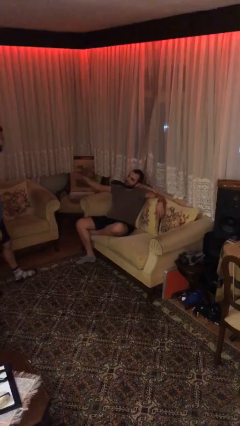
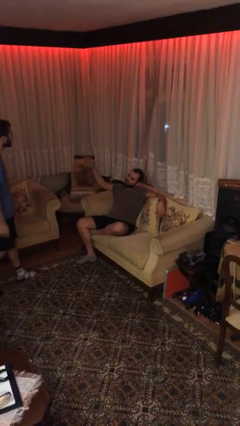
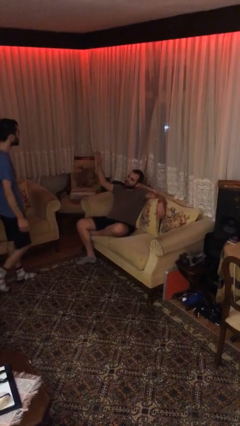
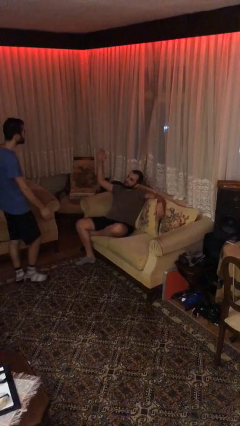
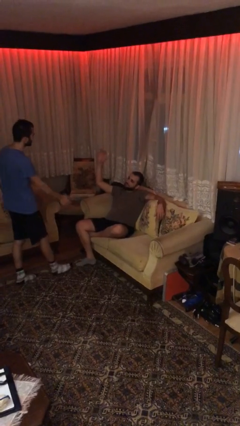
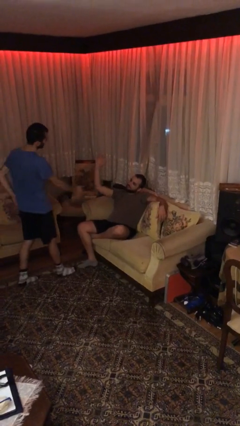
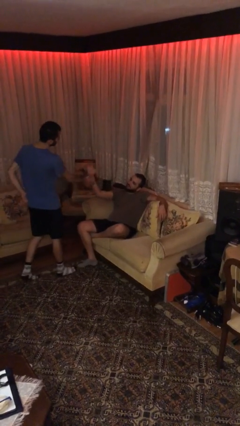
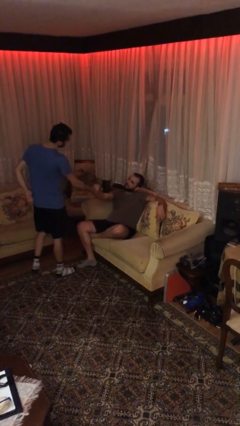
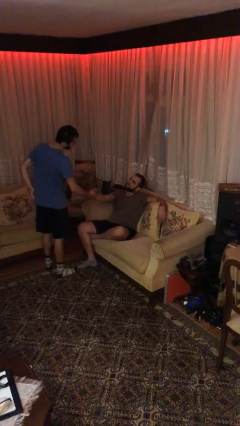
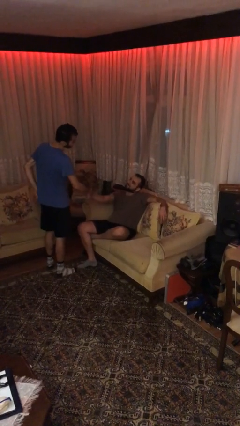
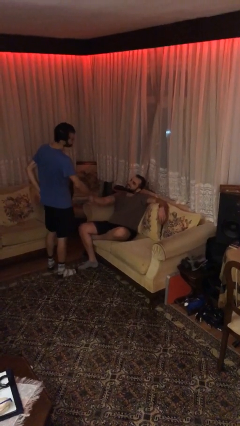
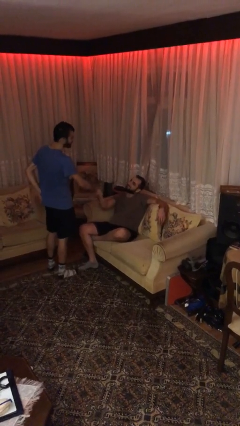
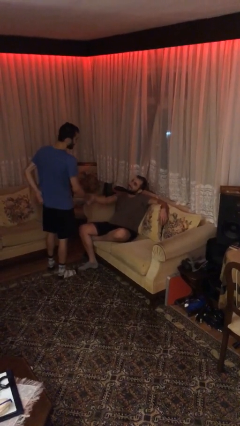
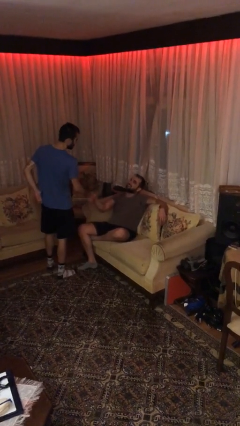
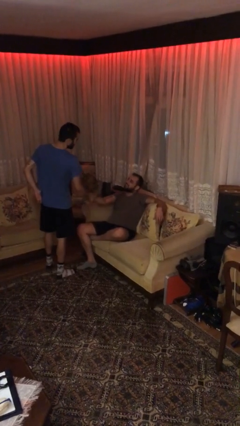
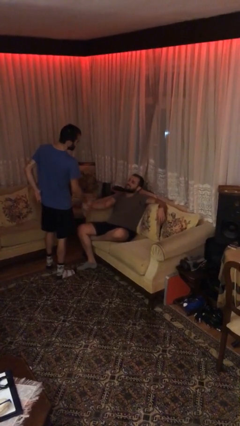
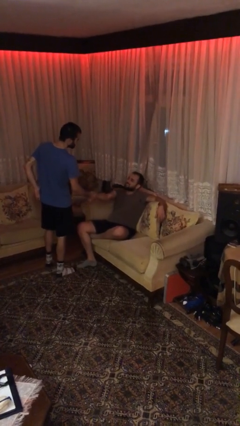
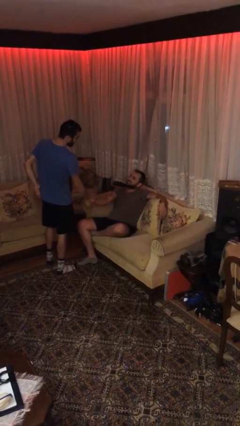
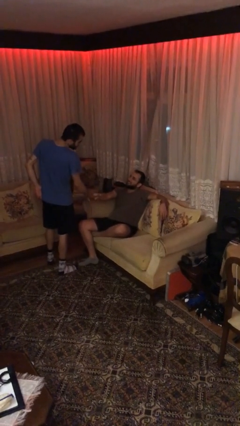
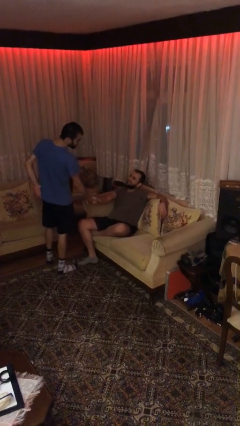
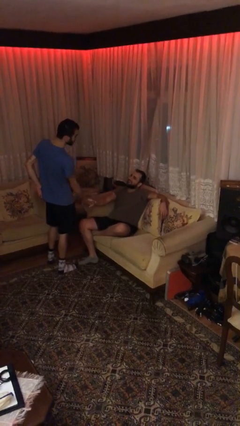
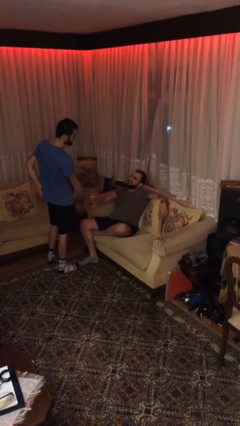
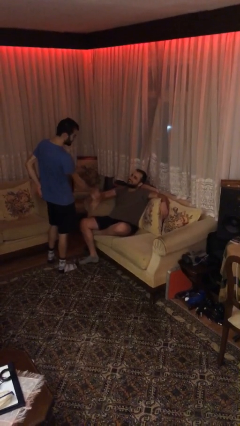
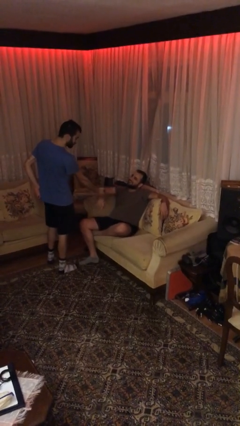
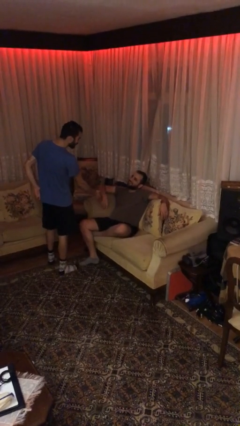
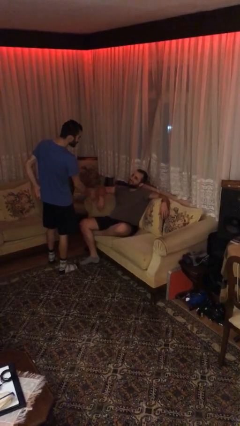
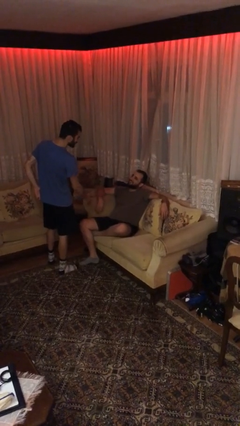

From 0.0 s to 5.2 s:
person shakes hand

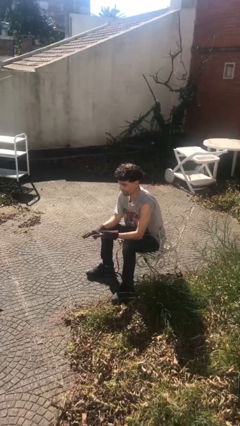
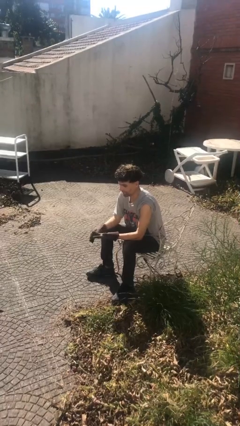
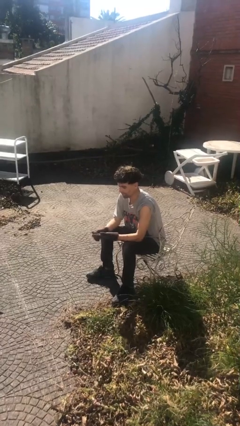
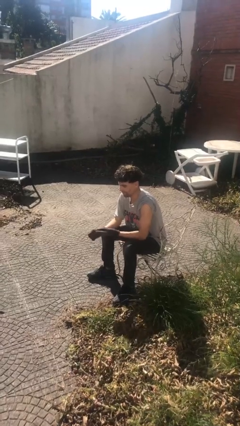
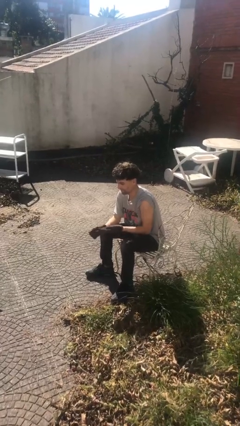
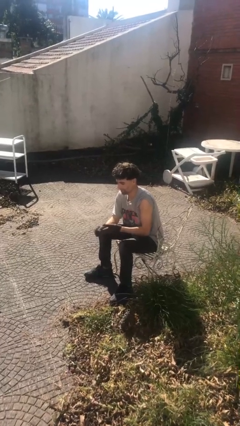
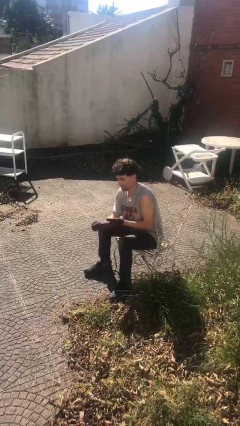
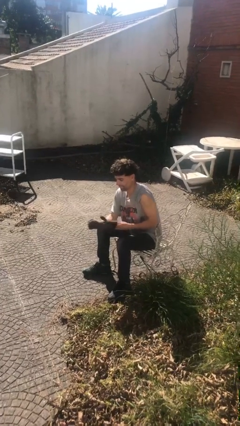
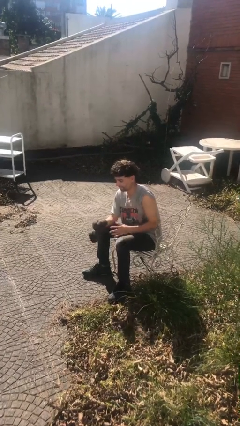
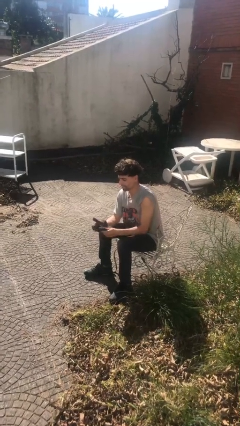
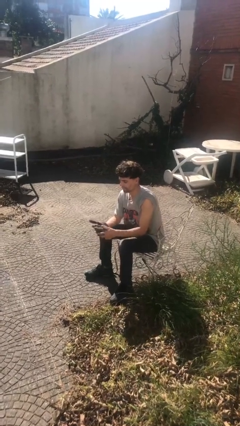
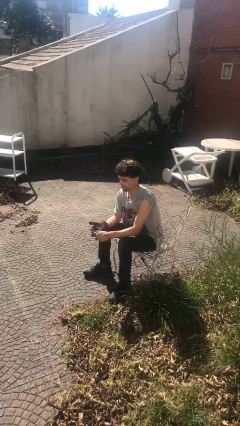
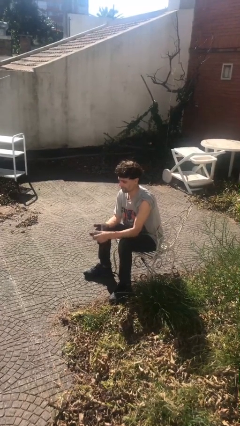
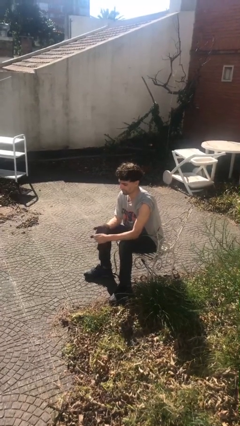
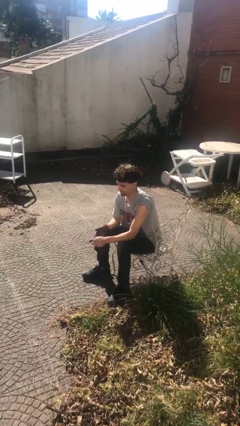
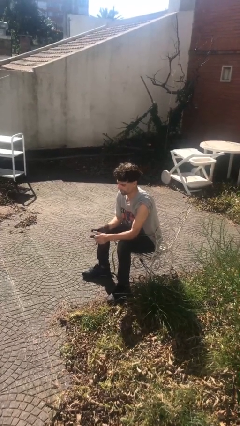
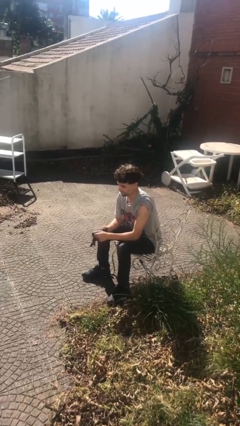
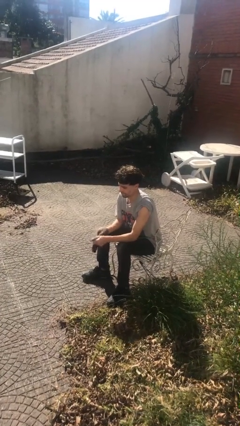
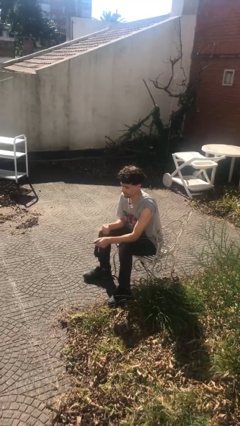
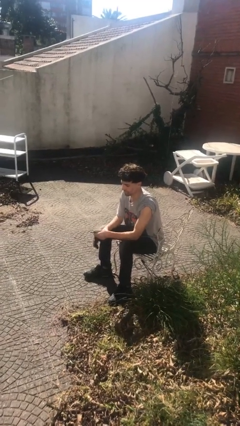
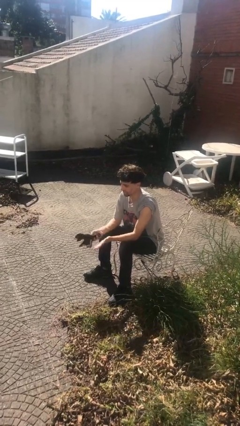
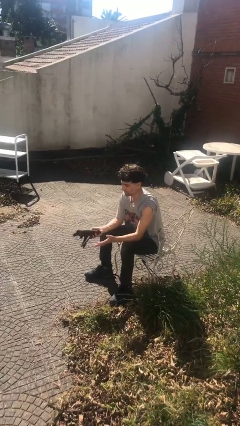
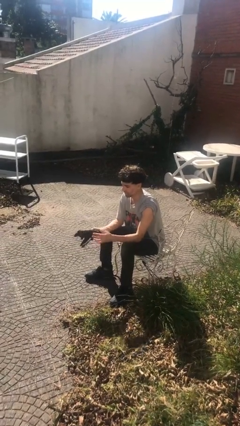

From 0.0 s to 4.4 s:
person takes off gloves

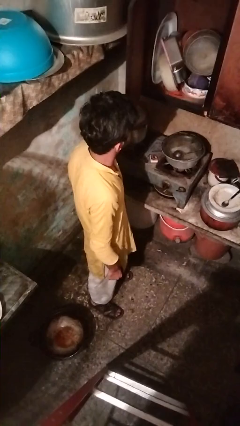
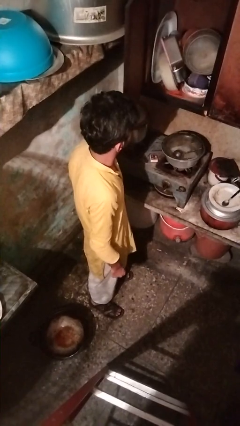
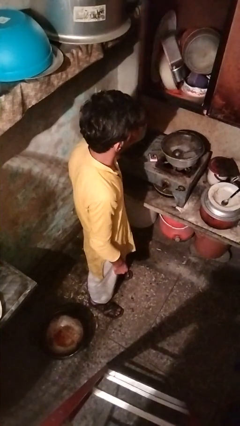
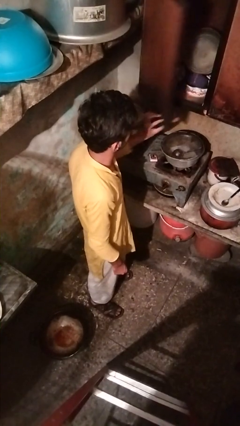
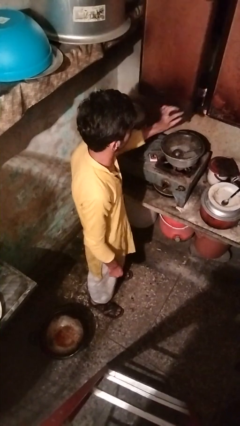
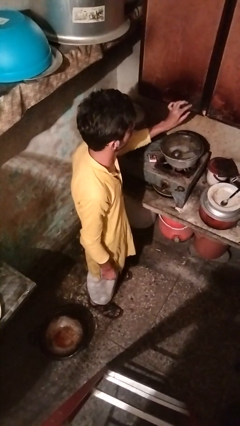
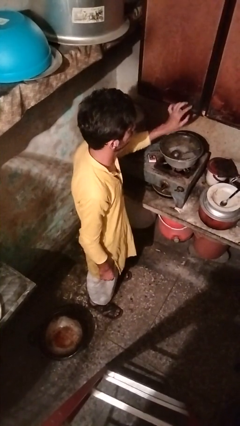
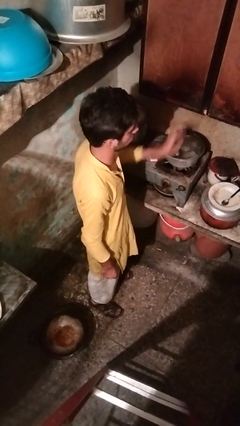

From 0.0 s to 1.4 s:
person closes cabinet

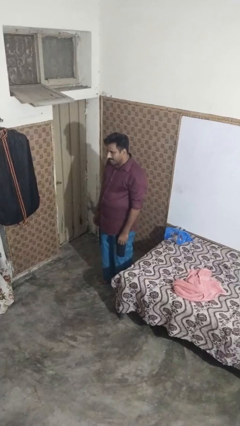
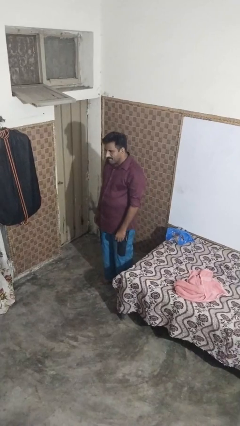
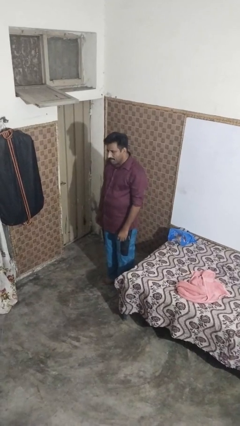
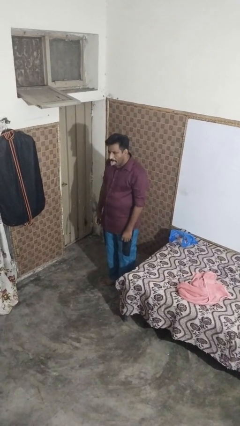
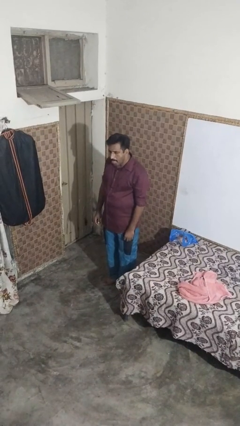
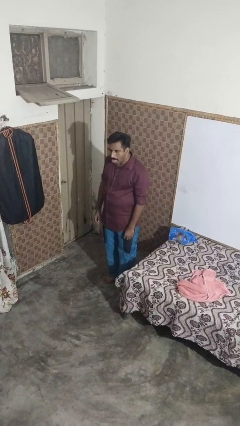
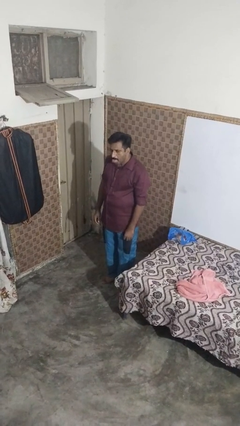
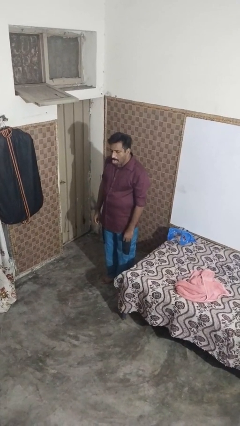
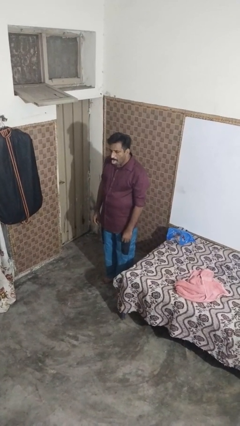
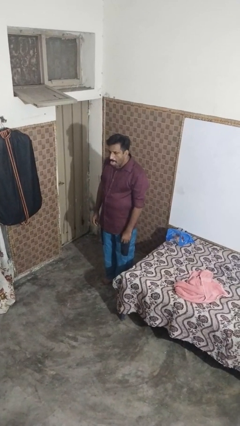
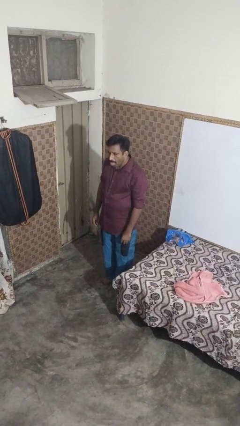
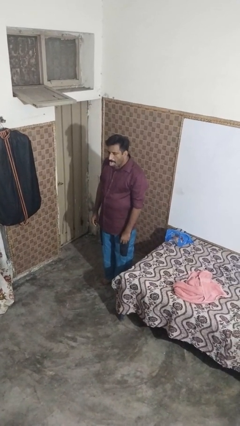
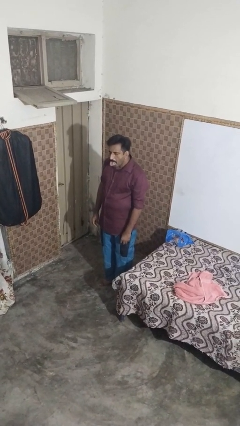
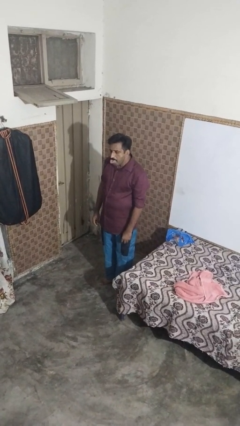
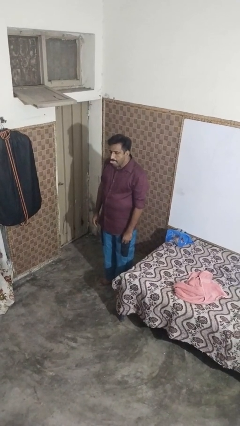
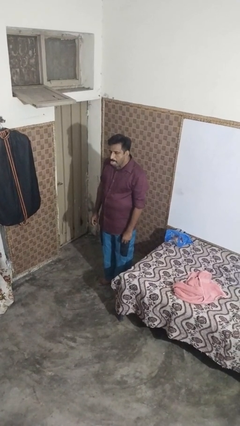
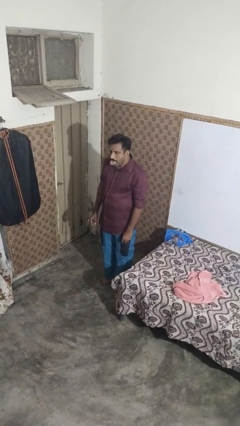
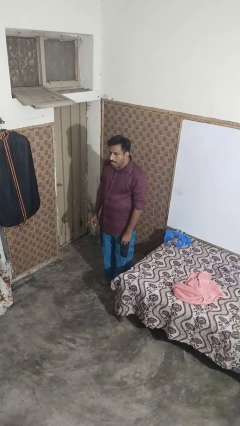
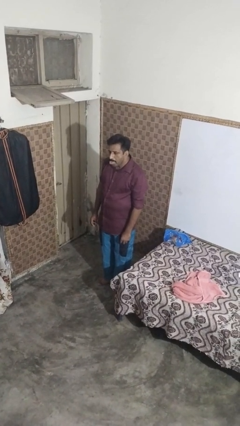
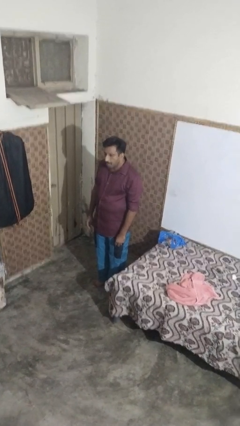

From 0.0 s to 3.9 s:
person sticks out tongue

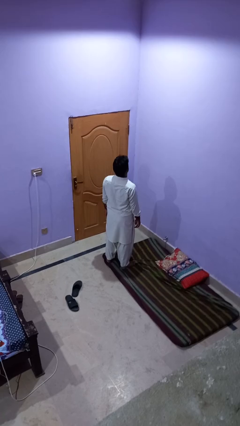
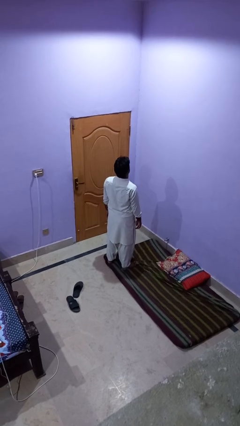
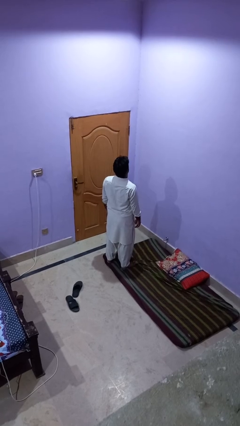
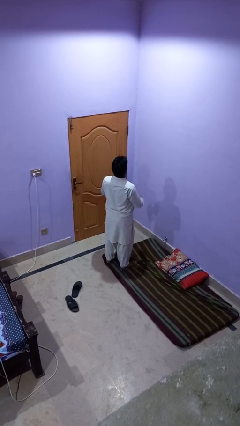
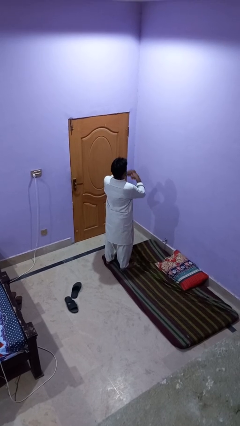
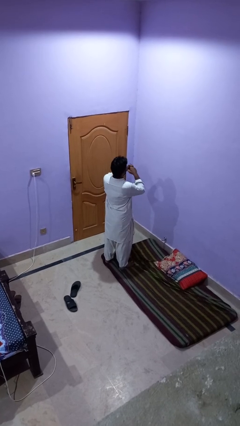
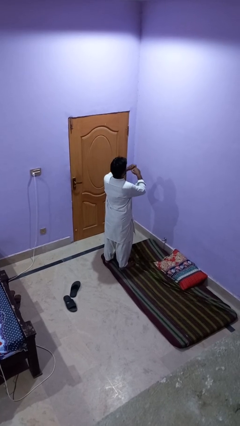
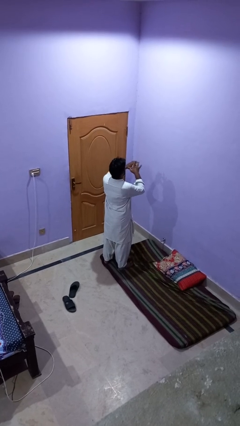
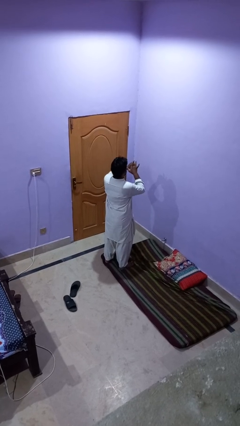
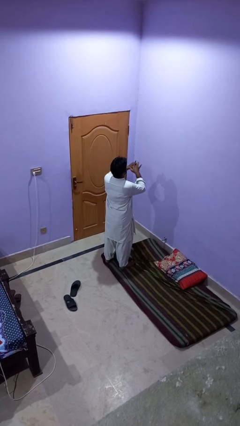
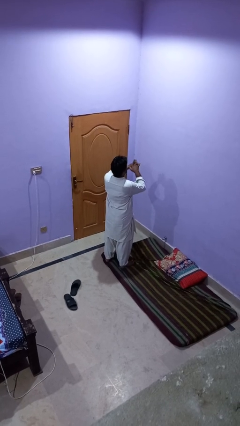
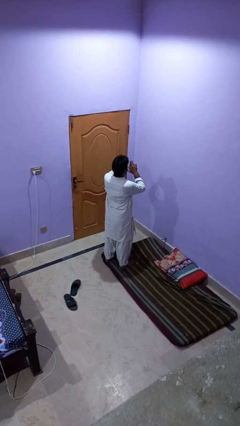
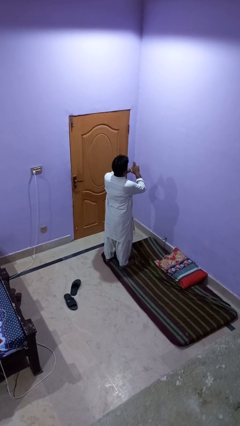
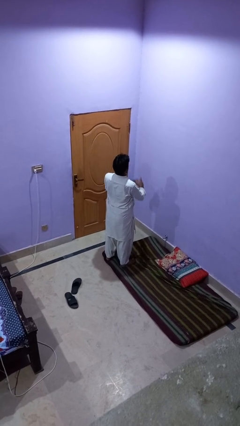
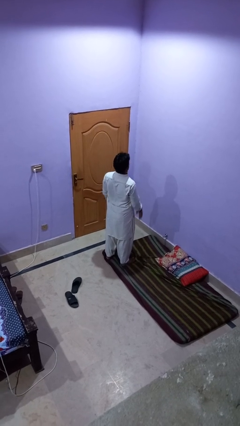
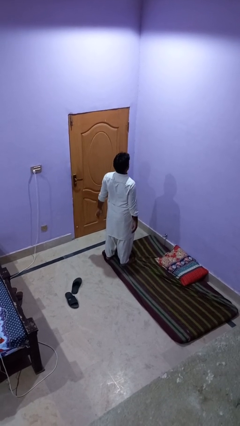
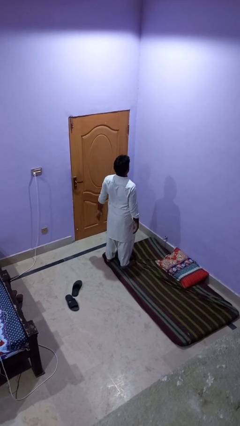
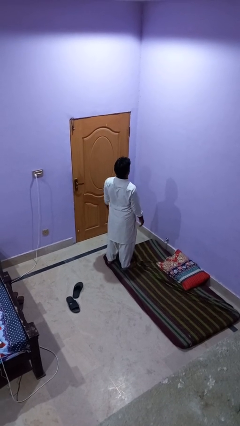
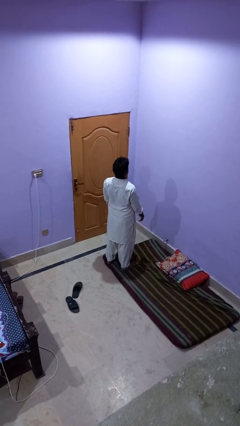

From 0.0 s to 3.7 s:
person snaps fingers
